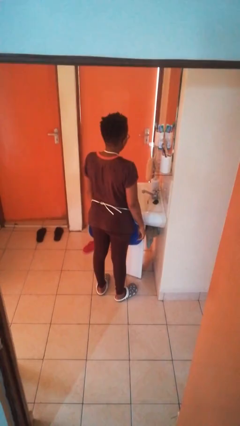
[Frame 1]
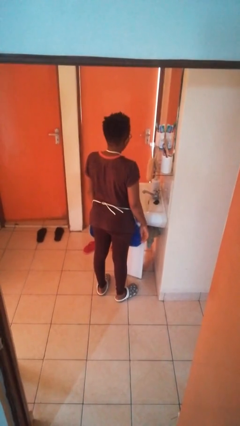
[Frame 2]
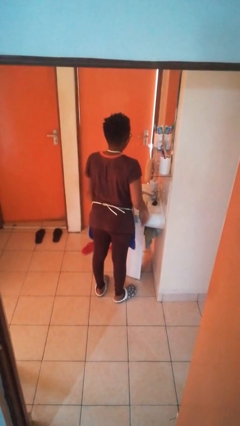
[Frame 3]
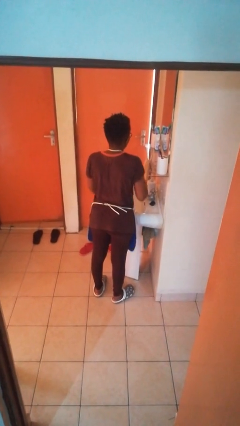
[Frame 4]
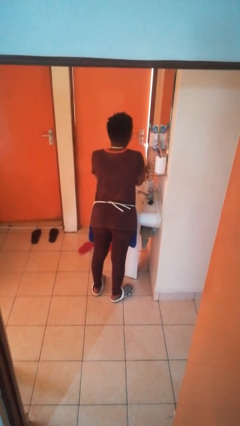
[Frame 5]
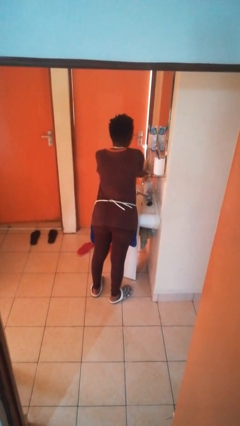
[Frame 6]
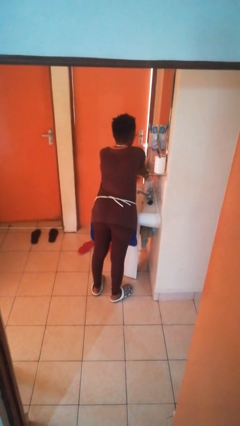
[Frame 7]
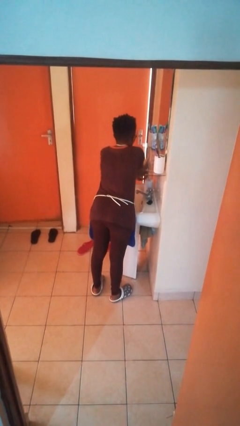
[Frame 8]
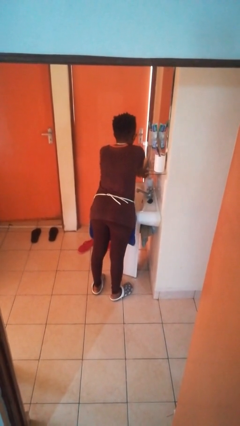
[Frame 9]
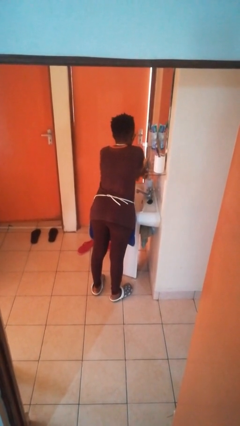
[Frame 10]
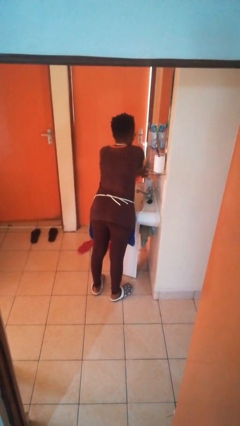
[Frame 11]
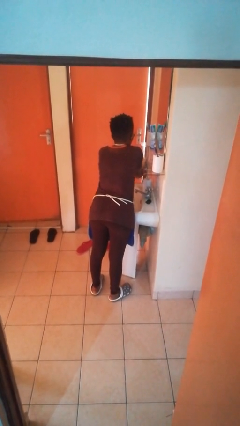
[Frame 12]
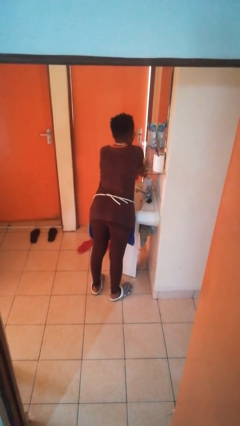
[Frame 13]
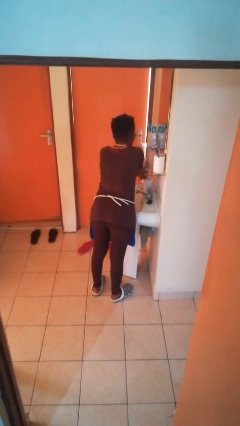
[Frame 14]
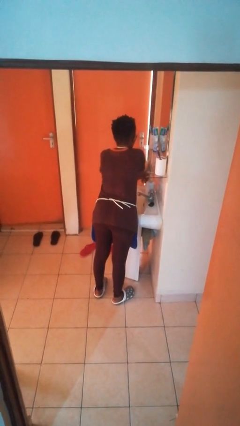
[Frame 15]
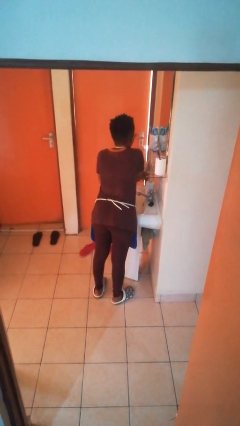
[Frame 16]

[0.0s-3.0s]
person dries hands with towel

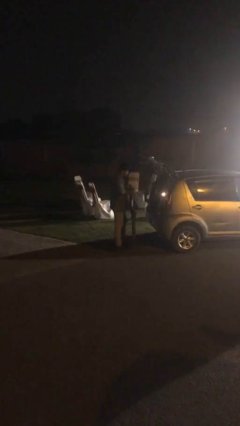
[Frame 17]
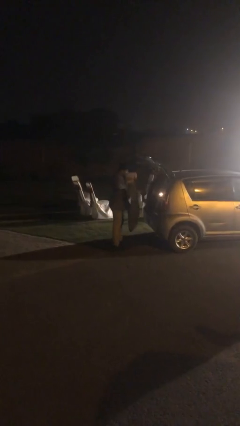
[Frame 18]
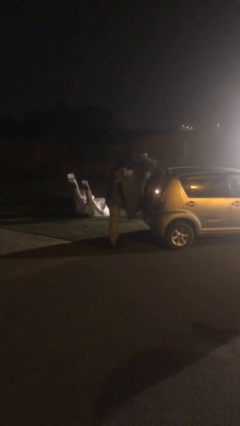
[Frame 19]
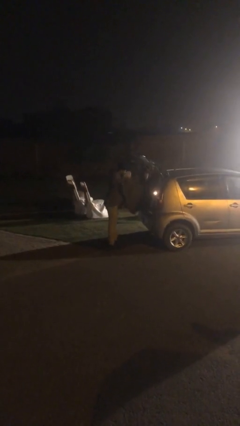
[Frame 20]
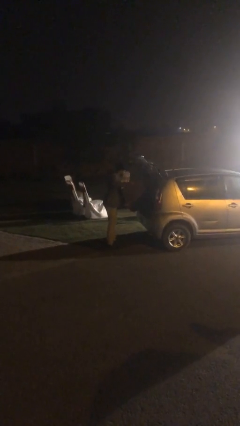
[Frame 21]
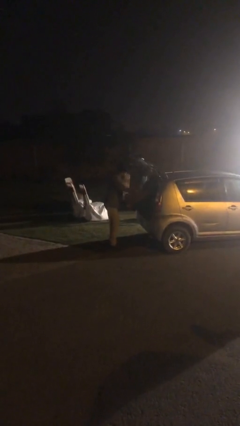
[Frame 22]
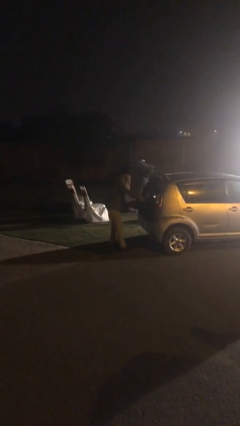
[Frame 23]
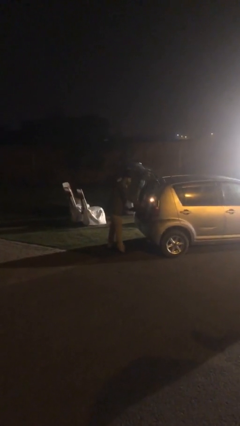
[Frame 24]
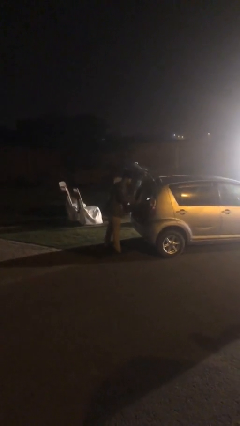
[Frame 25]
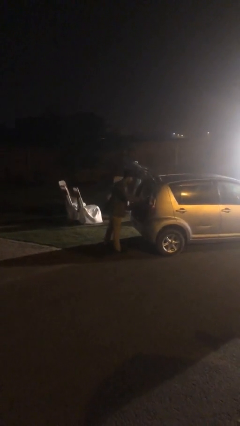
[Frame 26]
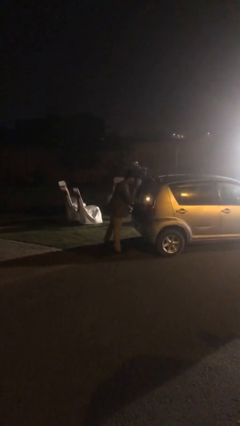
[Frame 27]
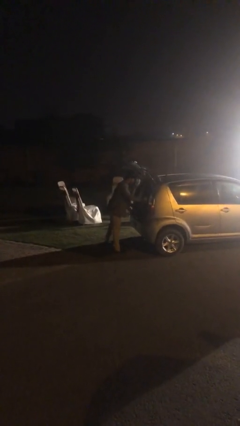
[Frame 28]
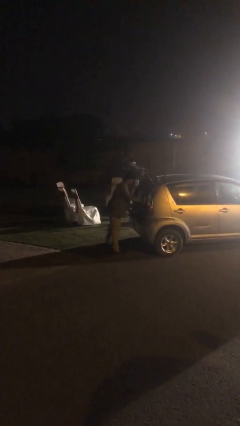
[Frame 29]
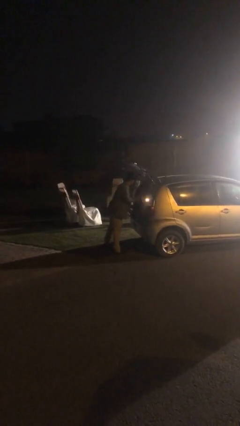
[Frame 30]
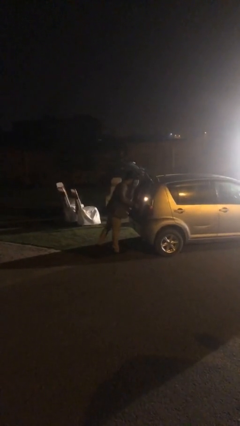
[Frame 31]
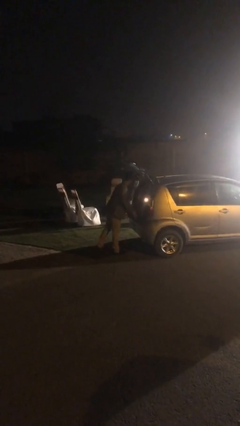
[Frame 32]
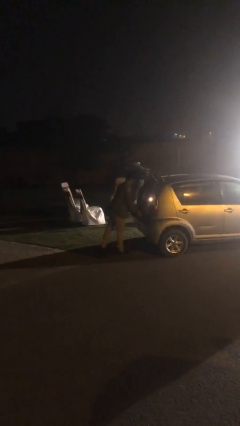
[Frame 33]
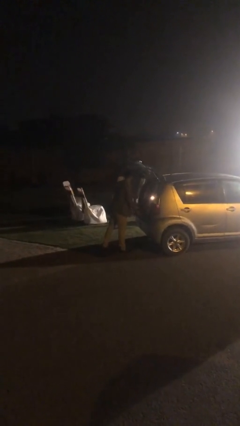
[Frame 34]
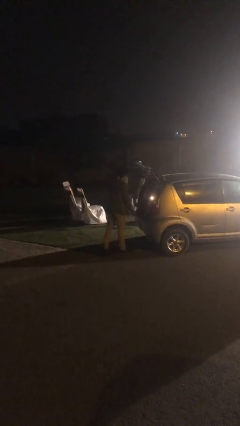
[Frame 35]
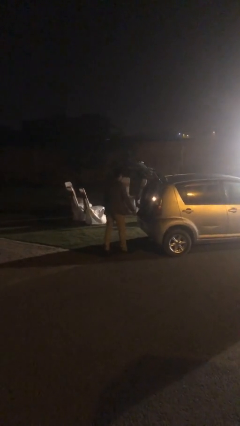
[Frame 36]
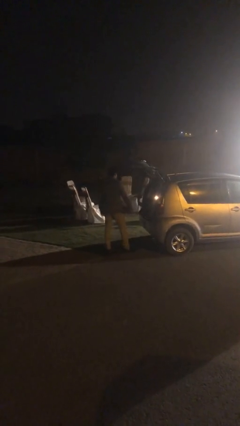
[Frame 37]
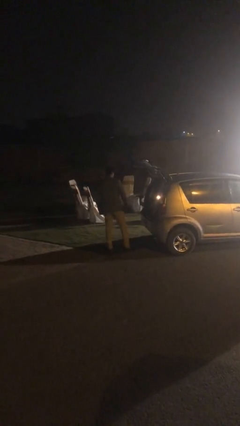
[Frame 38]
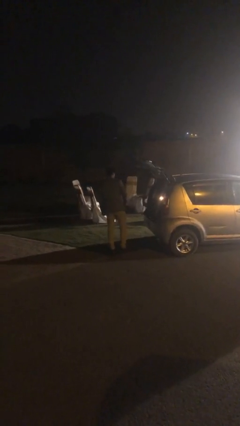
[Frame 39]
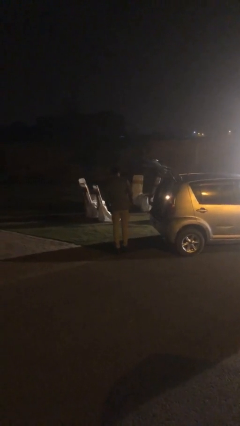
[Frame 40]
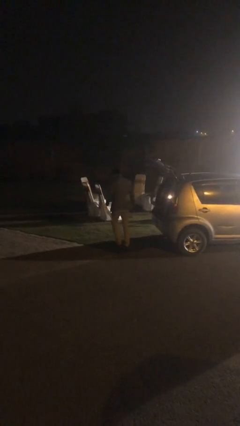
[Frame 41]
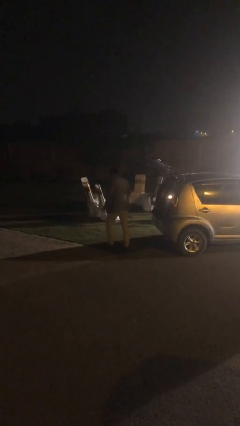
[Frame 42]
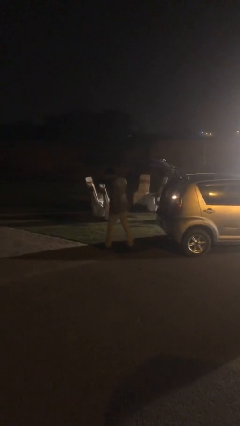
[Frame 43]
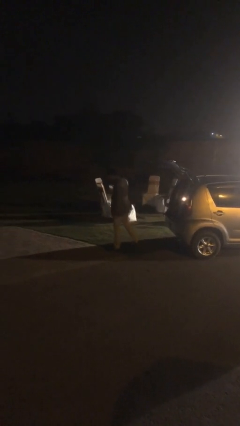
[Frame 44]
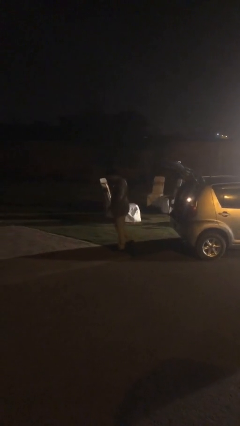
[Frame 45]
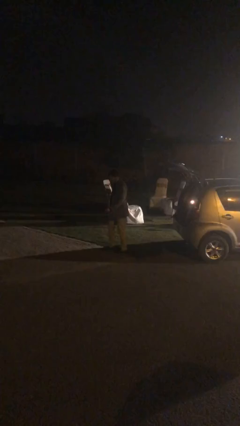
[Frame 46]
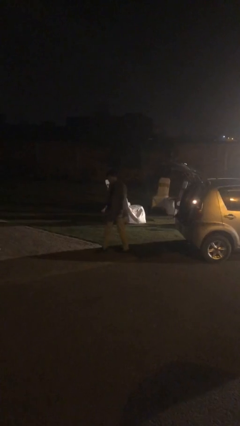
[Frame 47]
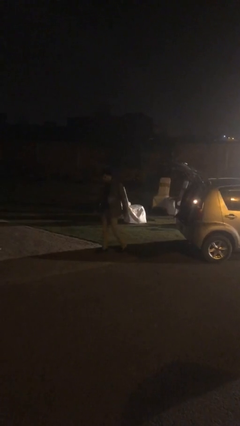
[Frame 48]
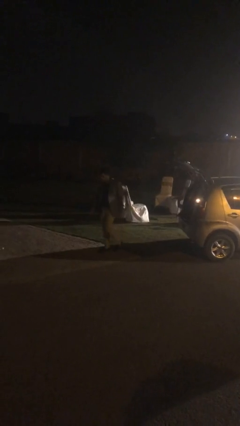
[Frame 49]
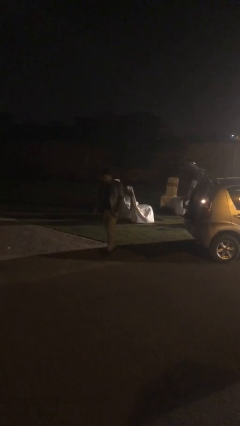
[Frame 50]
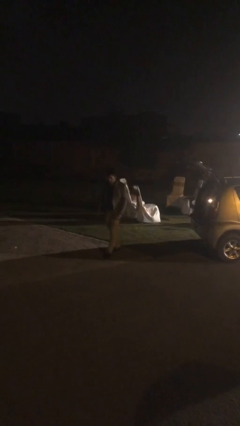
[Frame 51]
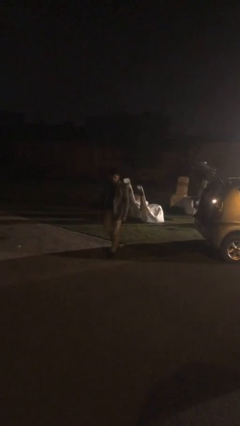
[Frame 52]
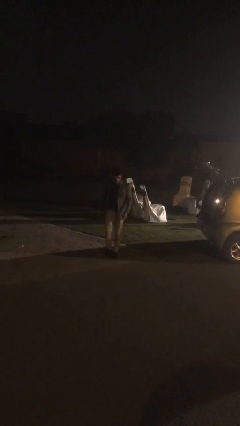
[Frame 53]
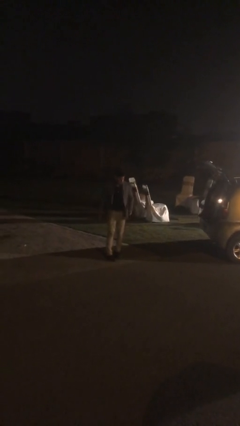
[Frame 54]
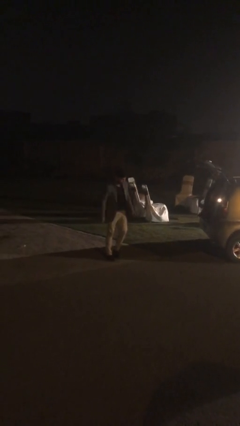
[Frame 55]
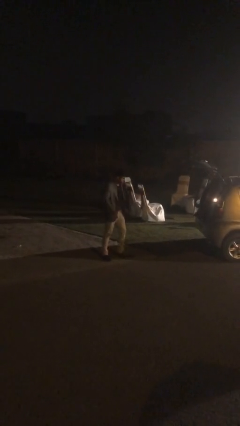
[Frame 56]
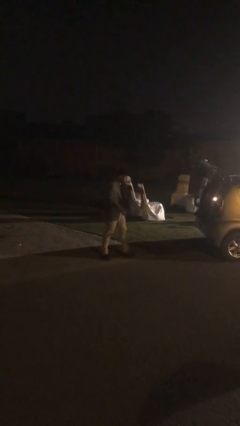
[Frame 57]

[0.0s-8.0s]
person loads car

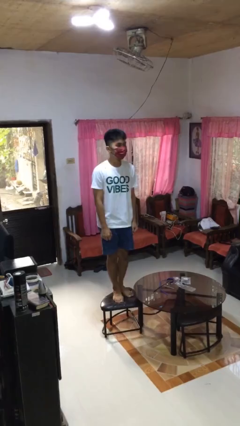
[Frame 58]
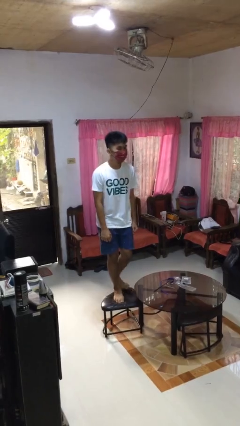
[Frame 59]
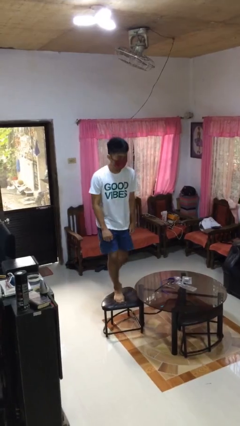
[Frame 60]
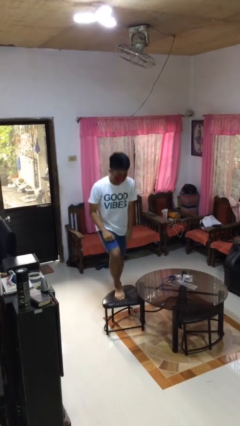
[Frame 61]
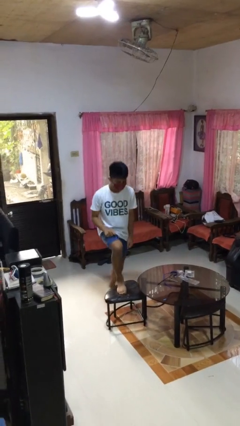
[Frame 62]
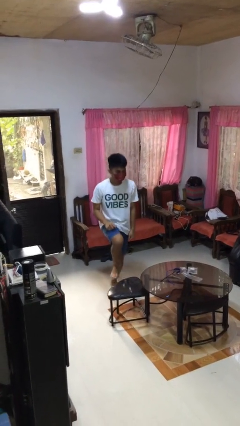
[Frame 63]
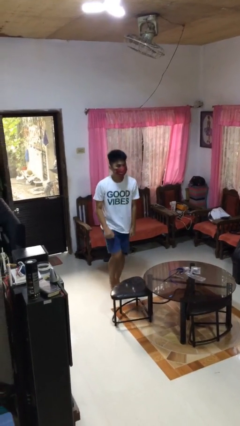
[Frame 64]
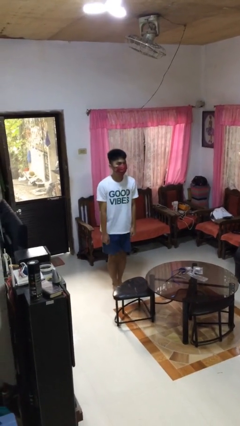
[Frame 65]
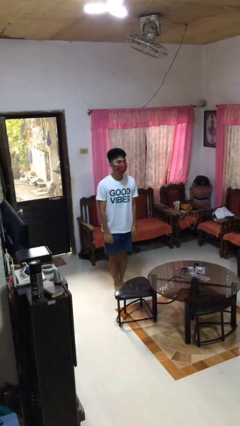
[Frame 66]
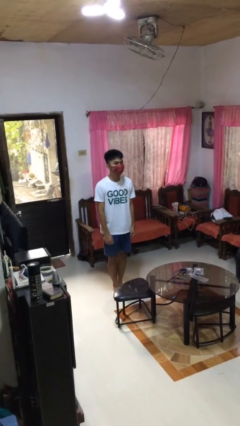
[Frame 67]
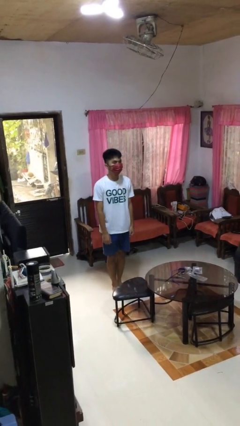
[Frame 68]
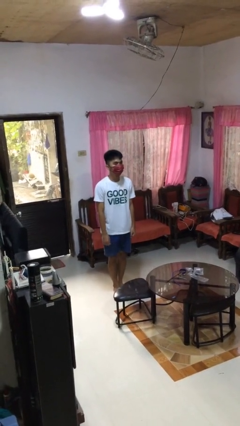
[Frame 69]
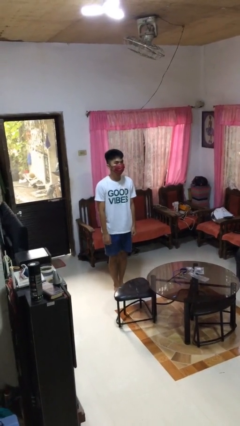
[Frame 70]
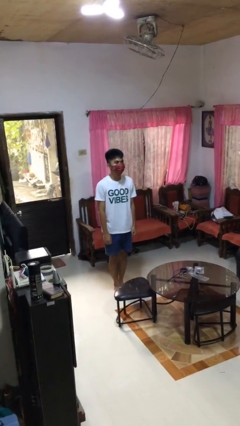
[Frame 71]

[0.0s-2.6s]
person climbs off chair

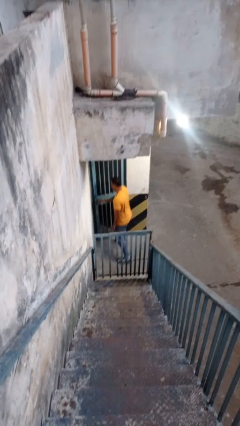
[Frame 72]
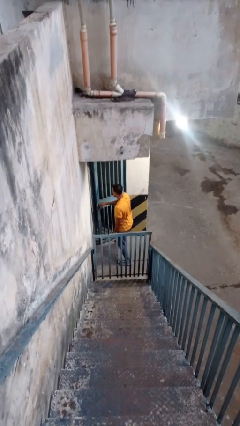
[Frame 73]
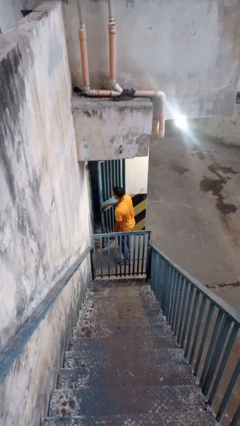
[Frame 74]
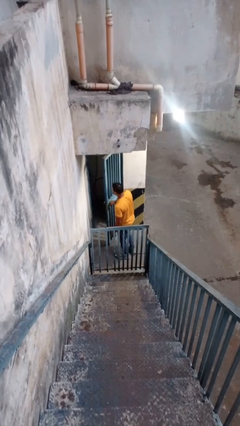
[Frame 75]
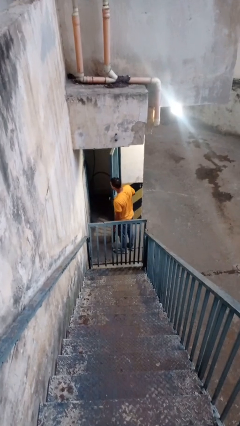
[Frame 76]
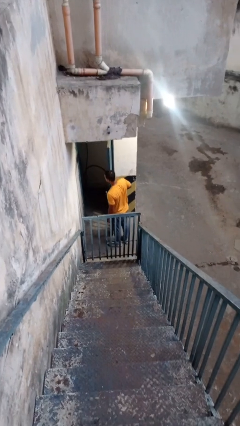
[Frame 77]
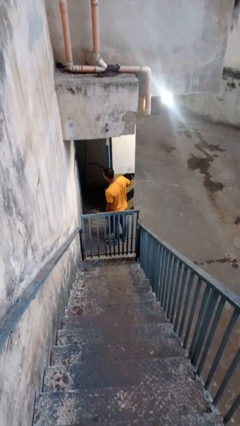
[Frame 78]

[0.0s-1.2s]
person opens facility door

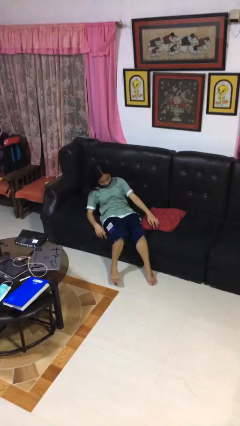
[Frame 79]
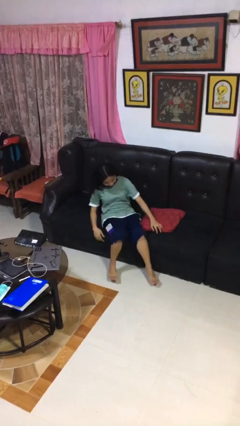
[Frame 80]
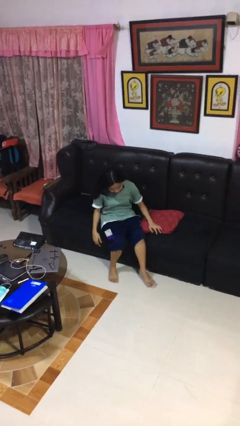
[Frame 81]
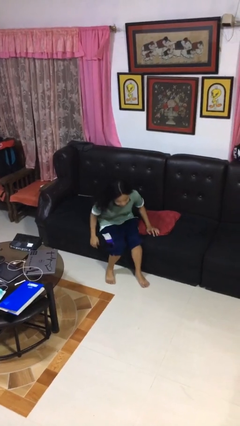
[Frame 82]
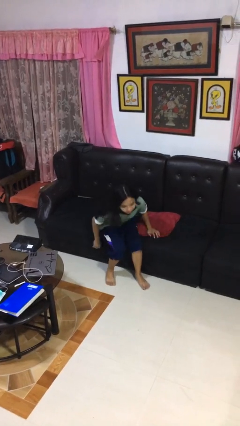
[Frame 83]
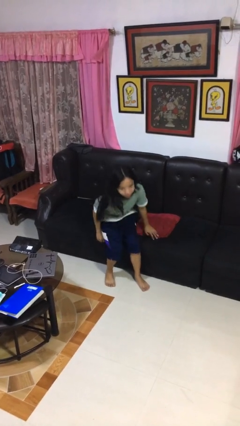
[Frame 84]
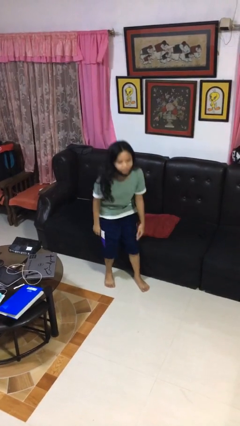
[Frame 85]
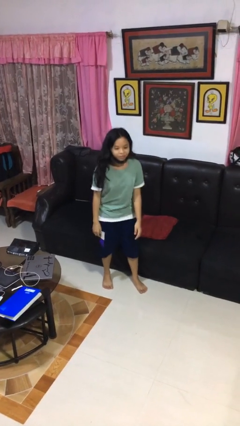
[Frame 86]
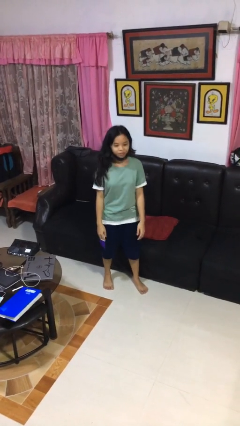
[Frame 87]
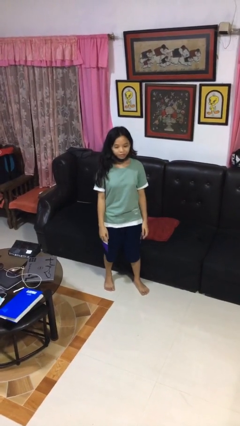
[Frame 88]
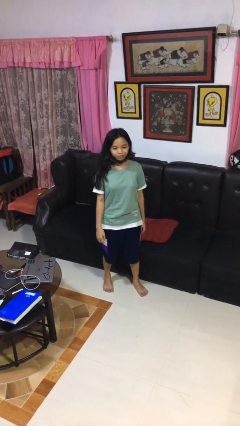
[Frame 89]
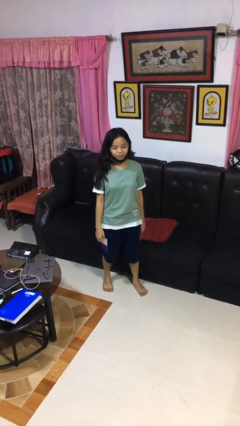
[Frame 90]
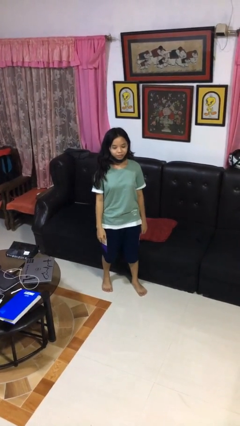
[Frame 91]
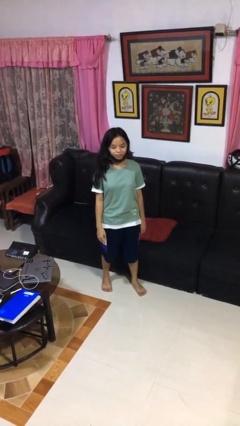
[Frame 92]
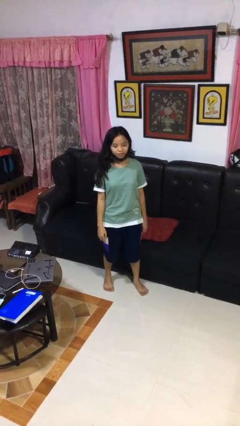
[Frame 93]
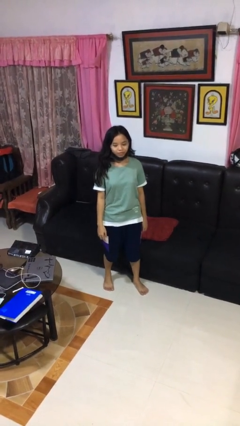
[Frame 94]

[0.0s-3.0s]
person stands up
